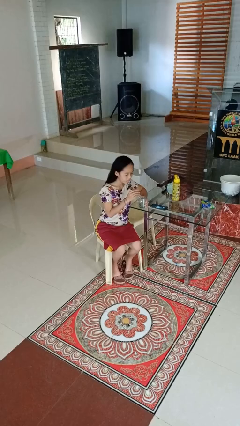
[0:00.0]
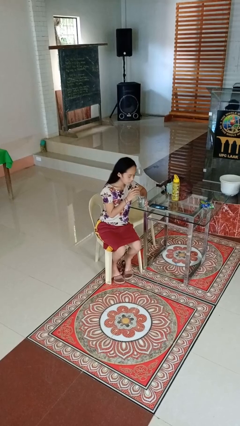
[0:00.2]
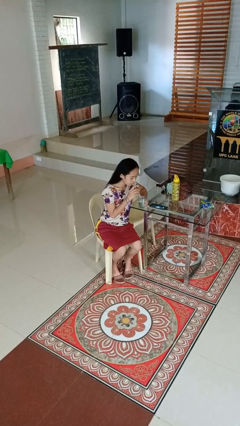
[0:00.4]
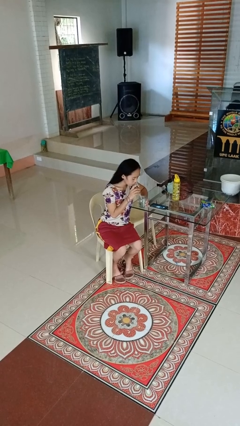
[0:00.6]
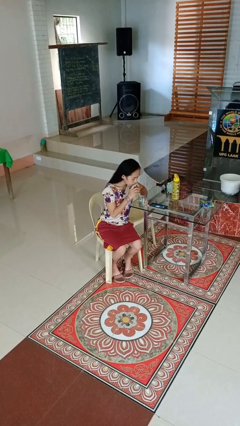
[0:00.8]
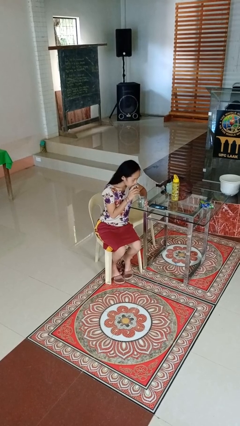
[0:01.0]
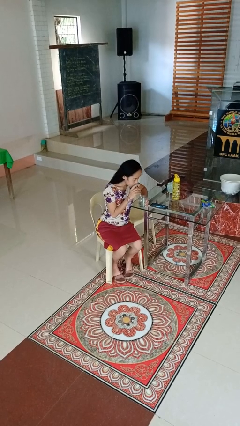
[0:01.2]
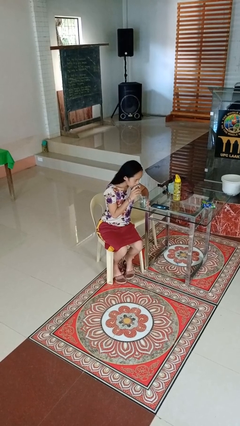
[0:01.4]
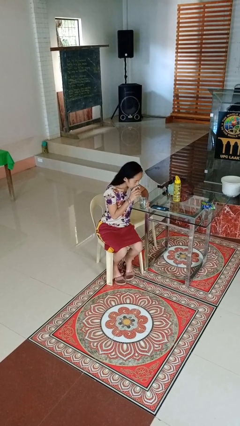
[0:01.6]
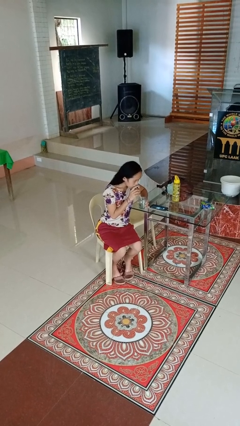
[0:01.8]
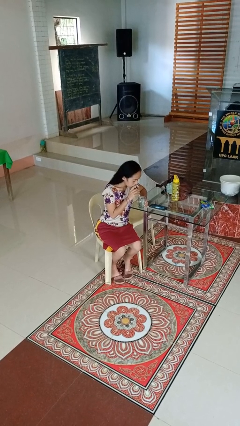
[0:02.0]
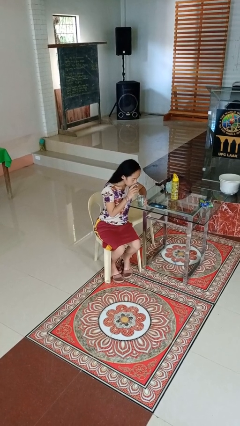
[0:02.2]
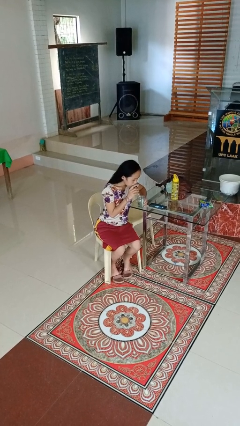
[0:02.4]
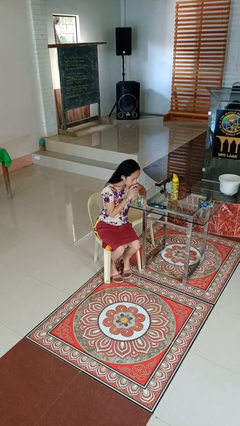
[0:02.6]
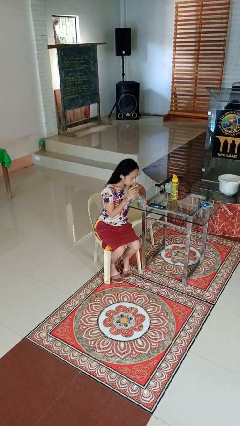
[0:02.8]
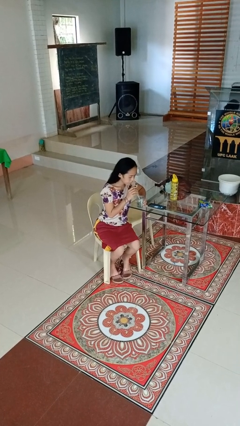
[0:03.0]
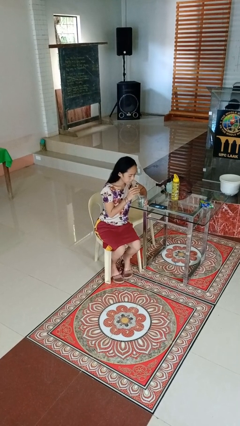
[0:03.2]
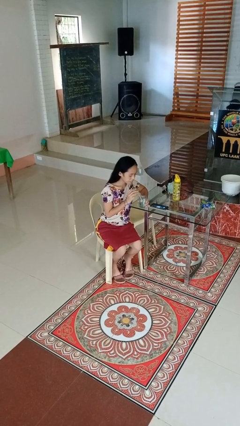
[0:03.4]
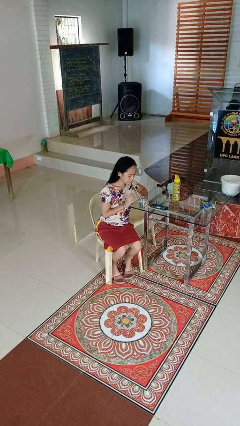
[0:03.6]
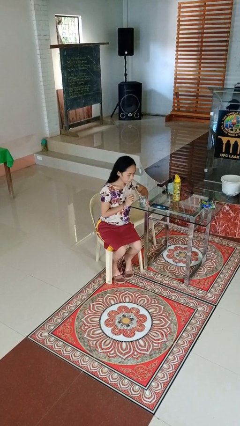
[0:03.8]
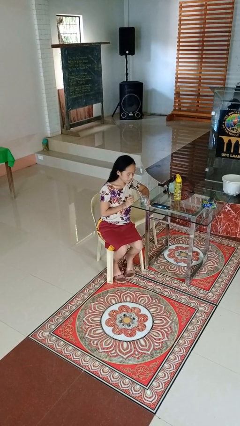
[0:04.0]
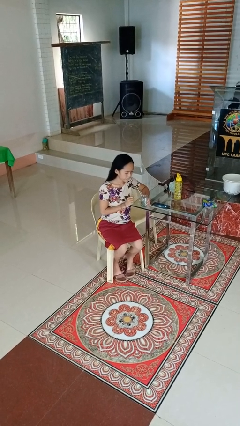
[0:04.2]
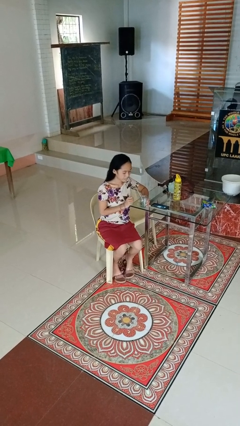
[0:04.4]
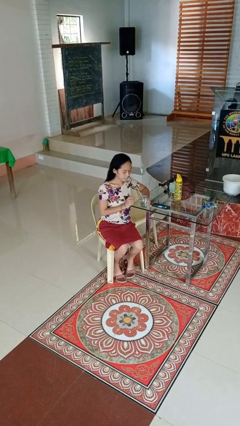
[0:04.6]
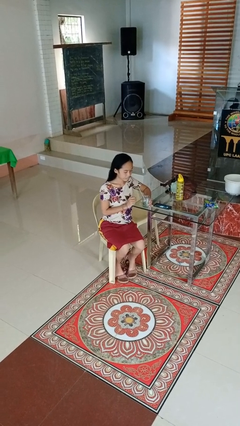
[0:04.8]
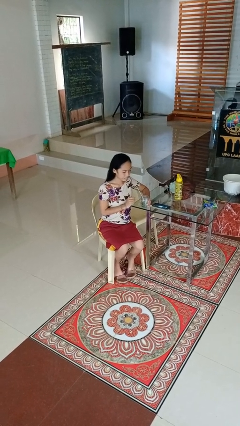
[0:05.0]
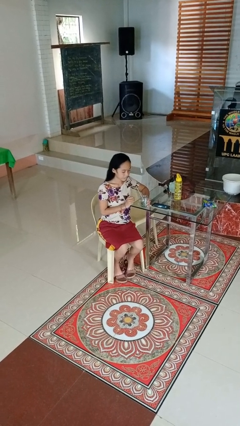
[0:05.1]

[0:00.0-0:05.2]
person drinks from straw

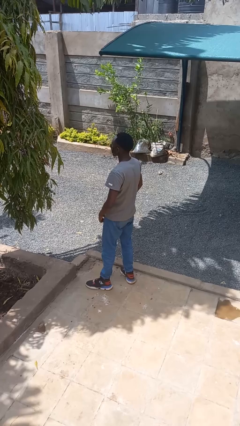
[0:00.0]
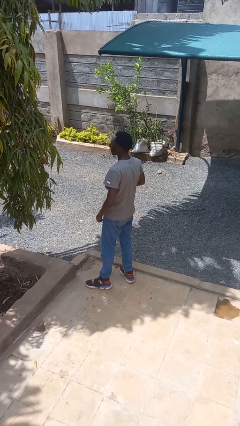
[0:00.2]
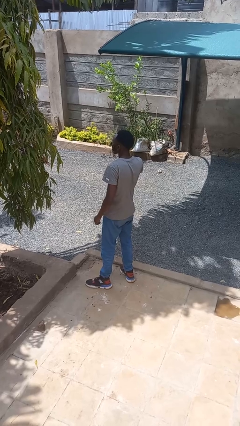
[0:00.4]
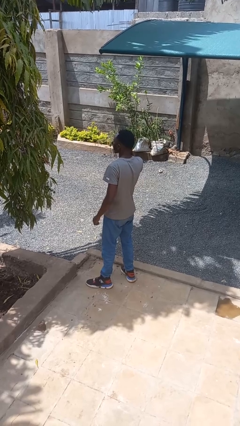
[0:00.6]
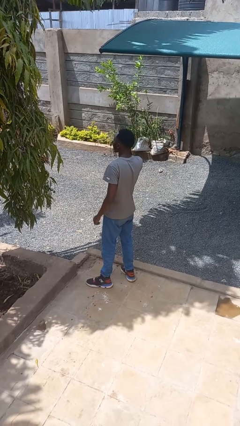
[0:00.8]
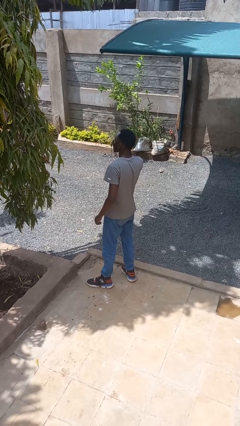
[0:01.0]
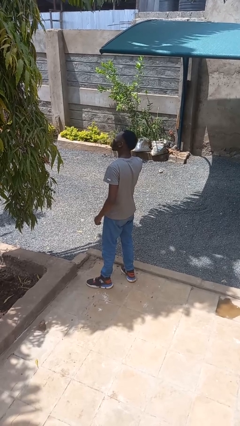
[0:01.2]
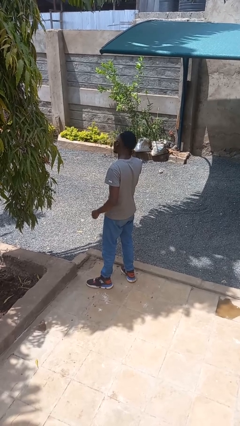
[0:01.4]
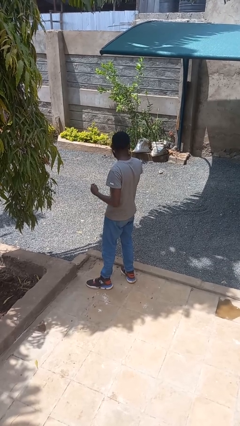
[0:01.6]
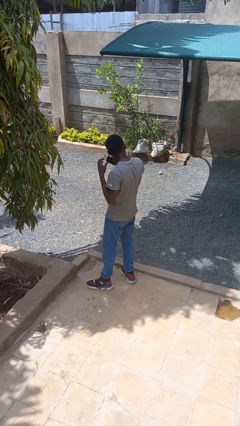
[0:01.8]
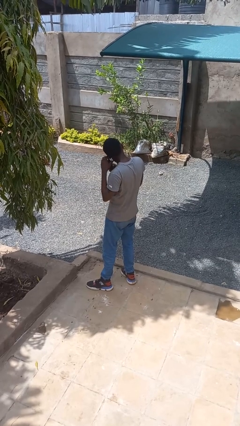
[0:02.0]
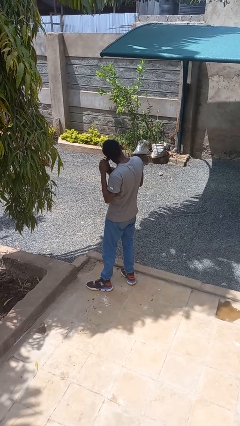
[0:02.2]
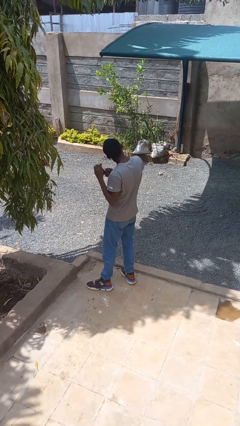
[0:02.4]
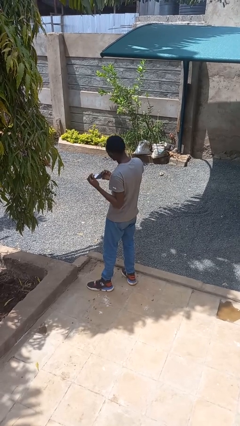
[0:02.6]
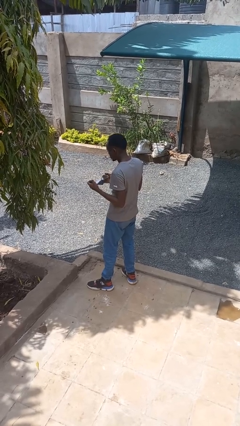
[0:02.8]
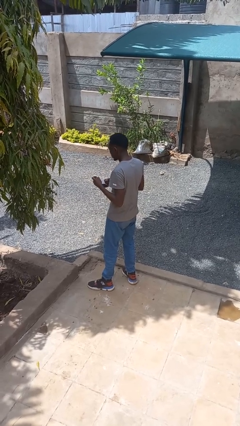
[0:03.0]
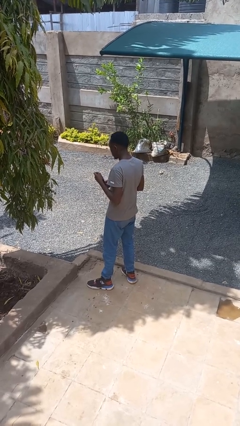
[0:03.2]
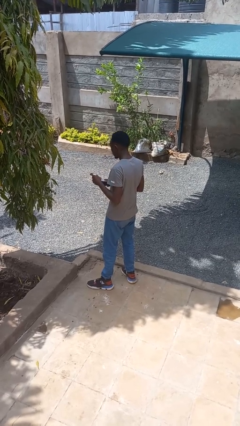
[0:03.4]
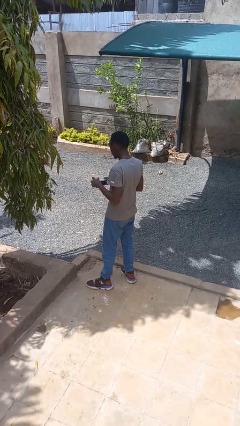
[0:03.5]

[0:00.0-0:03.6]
person takes off facemask

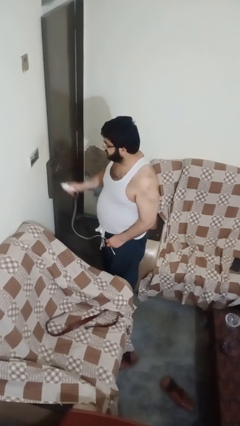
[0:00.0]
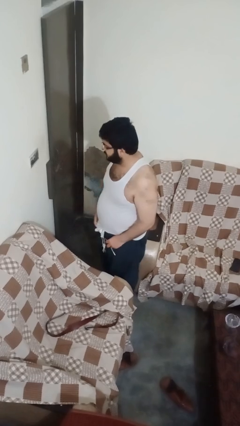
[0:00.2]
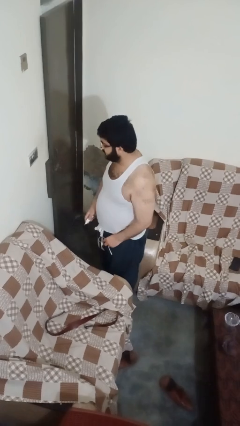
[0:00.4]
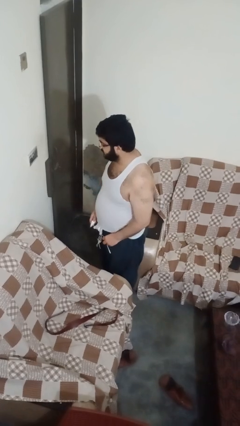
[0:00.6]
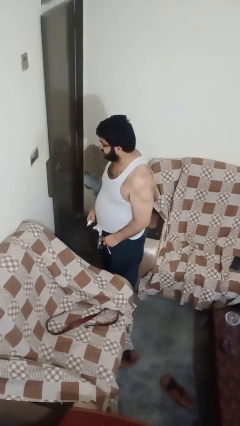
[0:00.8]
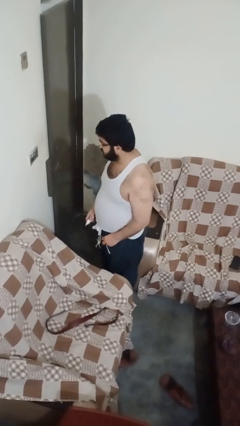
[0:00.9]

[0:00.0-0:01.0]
person unplugs from electrical socket

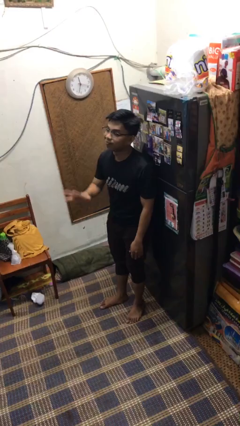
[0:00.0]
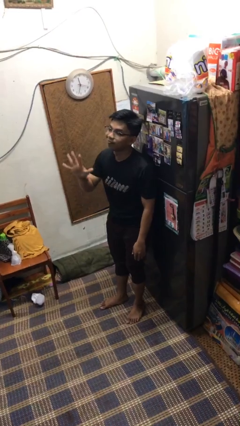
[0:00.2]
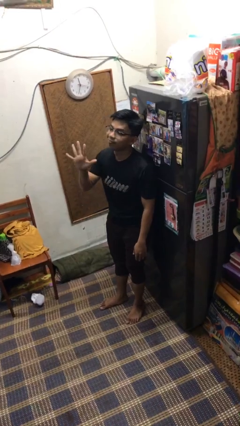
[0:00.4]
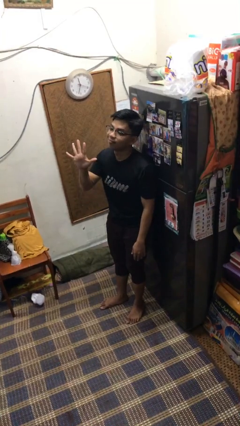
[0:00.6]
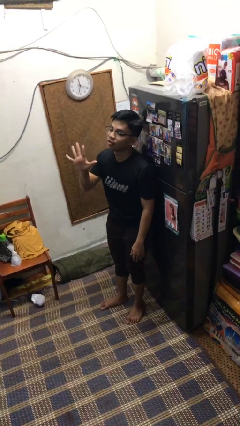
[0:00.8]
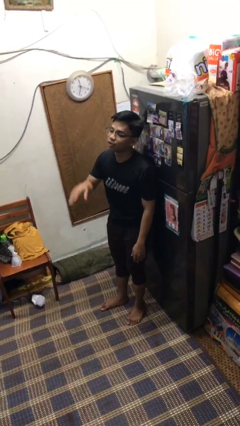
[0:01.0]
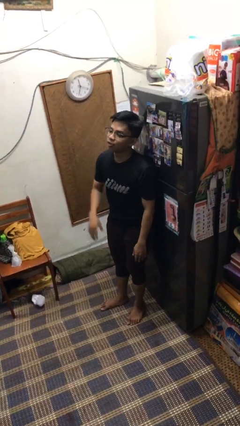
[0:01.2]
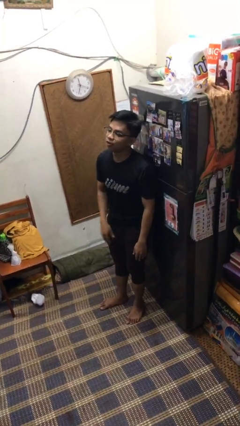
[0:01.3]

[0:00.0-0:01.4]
person gestures number five

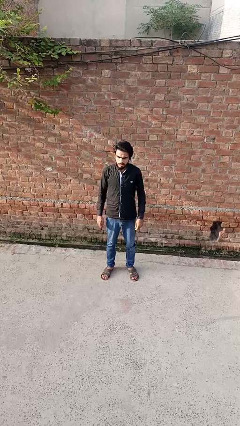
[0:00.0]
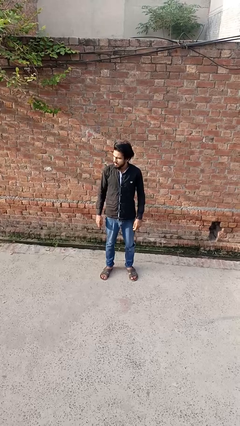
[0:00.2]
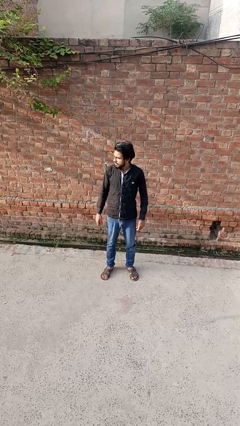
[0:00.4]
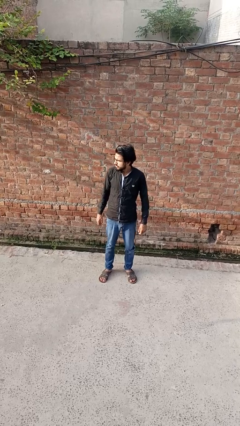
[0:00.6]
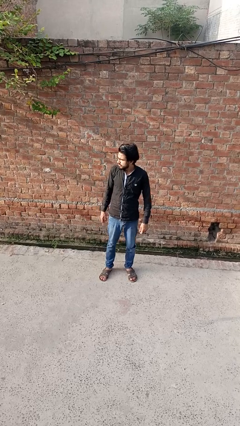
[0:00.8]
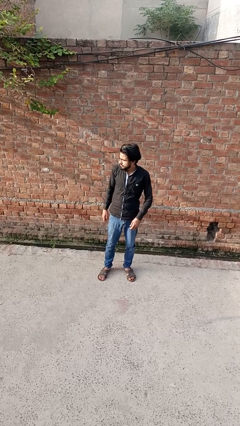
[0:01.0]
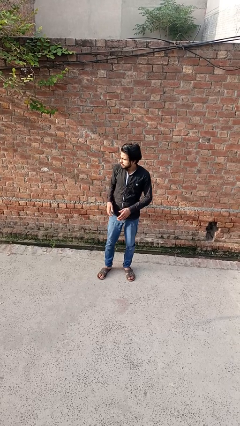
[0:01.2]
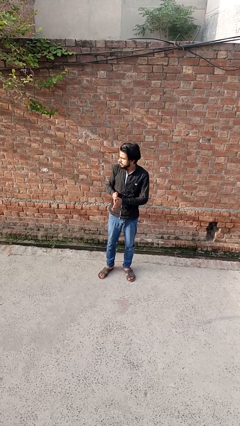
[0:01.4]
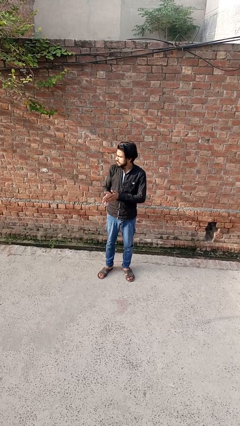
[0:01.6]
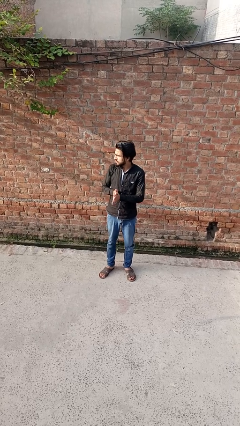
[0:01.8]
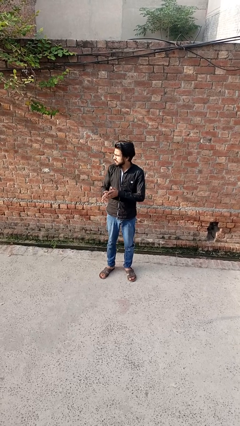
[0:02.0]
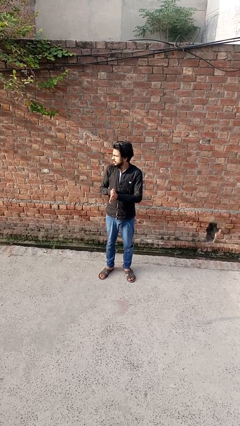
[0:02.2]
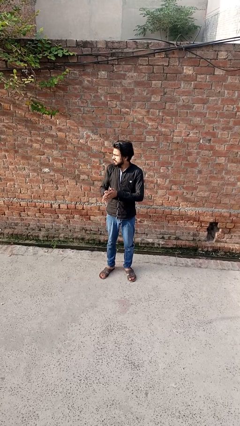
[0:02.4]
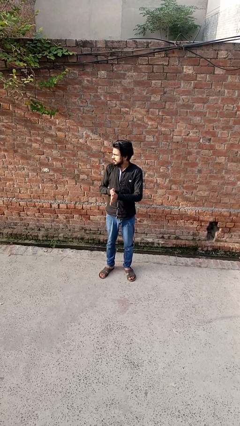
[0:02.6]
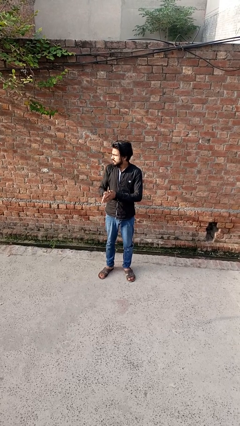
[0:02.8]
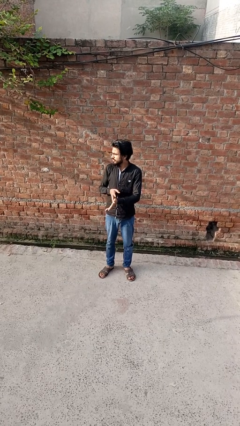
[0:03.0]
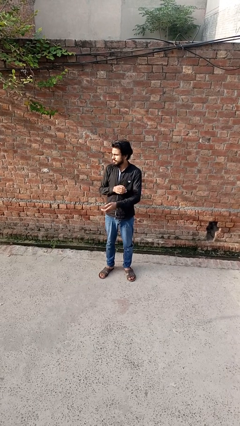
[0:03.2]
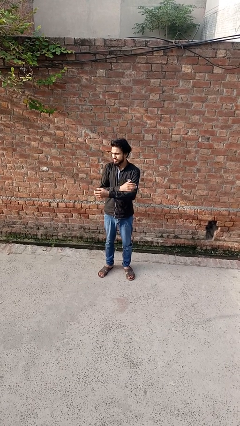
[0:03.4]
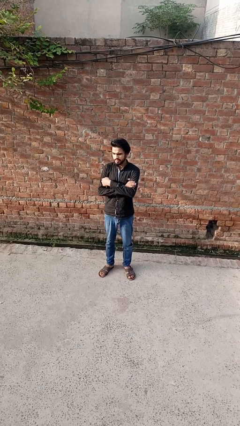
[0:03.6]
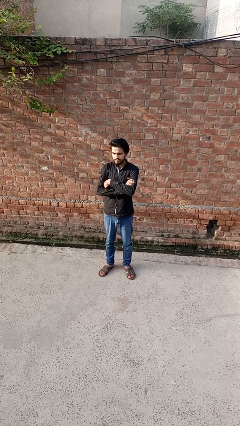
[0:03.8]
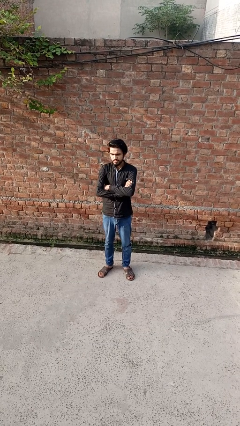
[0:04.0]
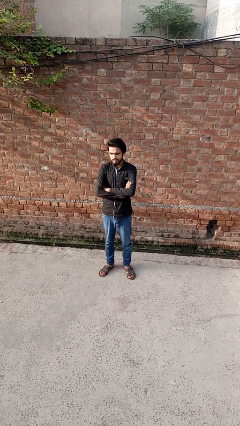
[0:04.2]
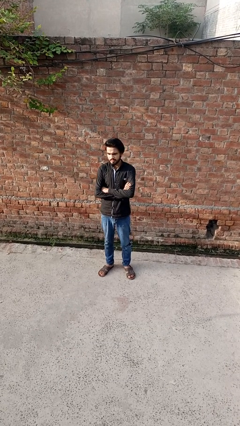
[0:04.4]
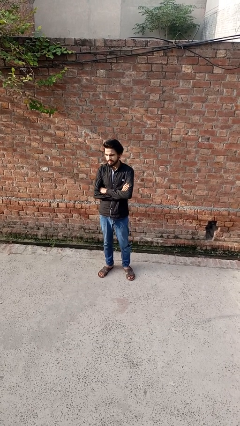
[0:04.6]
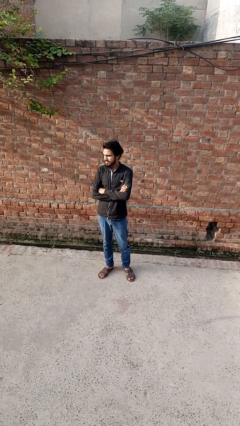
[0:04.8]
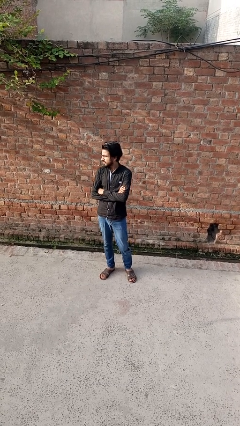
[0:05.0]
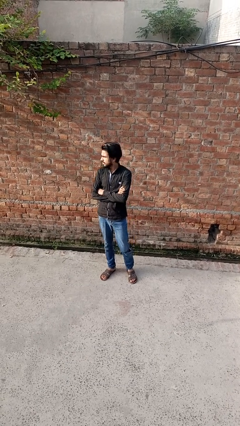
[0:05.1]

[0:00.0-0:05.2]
person blows into hands

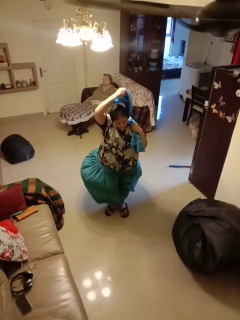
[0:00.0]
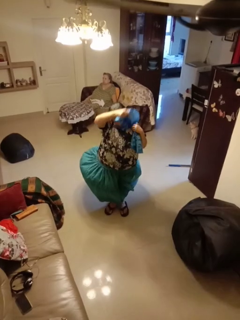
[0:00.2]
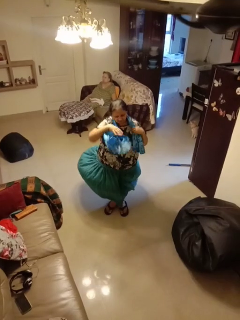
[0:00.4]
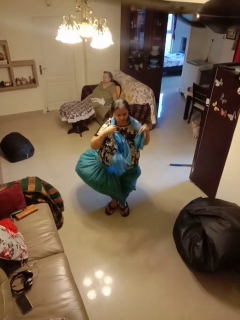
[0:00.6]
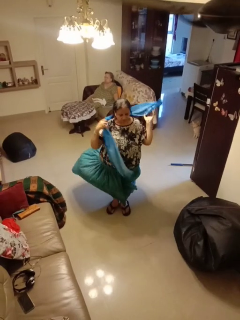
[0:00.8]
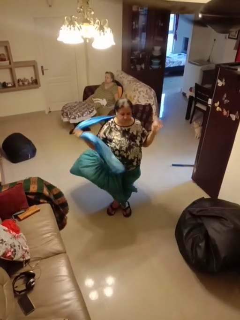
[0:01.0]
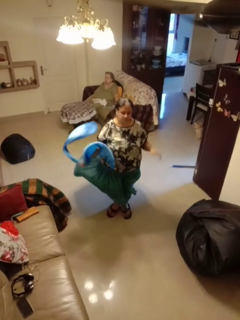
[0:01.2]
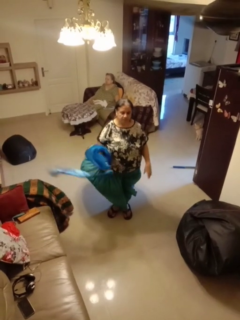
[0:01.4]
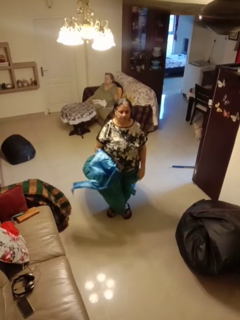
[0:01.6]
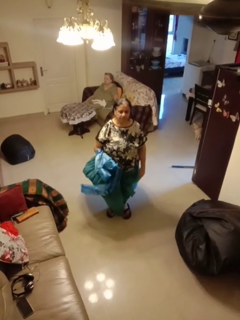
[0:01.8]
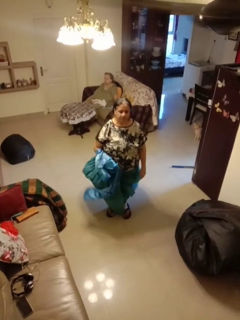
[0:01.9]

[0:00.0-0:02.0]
person takes off scarf
